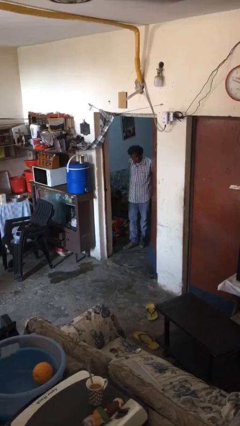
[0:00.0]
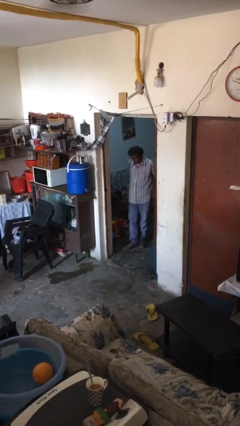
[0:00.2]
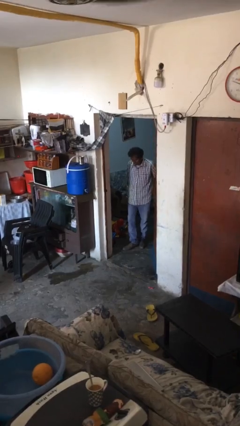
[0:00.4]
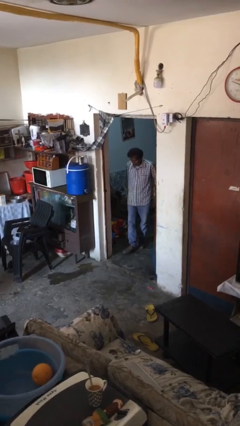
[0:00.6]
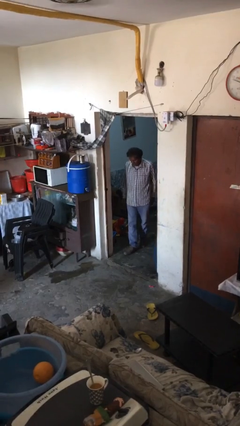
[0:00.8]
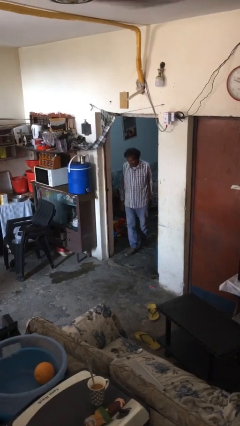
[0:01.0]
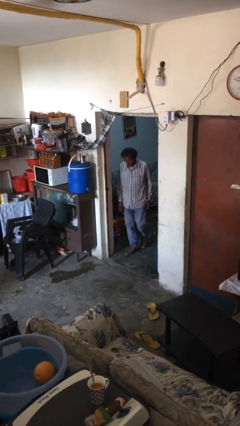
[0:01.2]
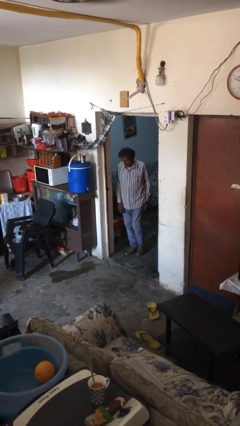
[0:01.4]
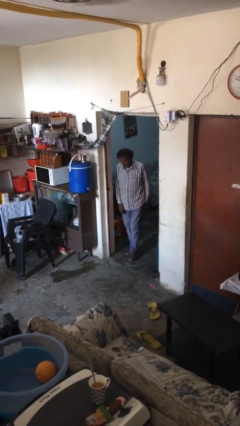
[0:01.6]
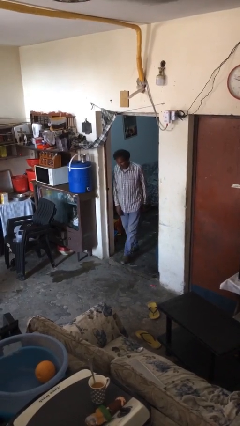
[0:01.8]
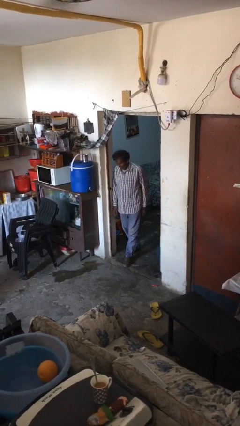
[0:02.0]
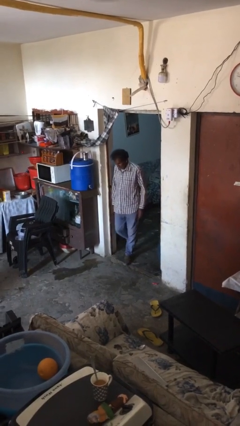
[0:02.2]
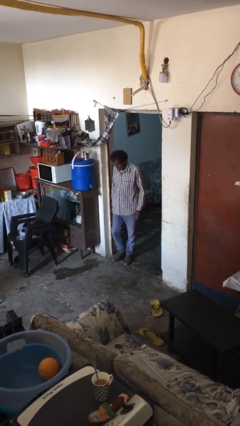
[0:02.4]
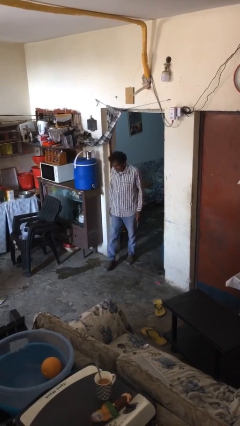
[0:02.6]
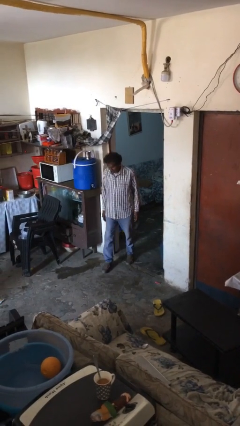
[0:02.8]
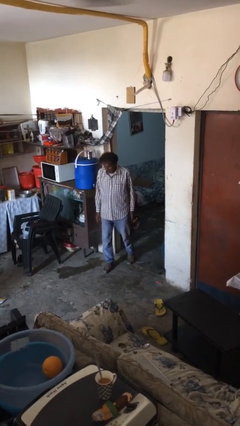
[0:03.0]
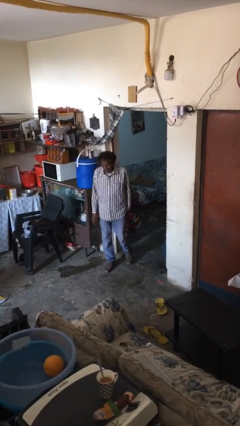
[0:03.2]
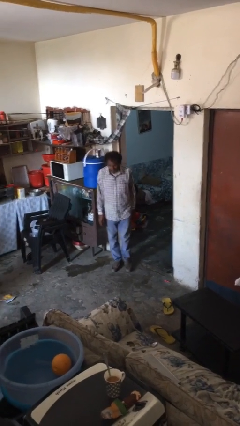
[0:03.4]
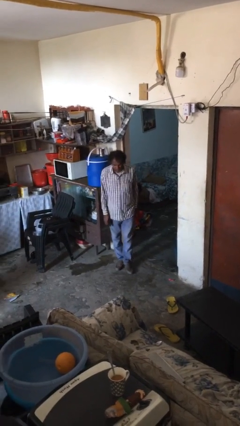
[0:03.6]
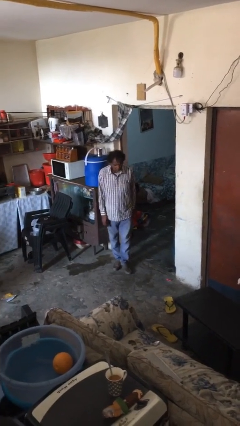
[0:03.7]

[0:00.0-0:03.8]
person enters scene through structure

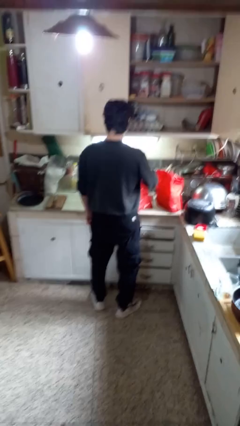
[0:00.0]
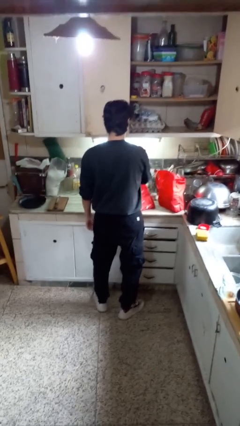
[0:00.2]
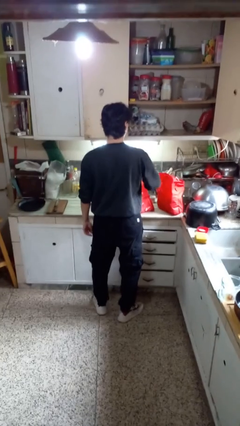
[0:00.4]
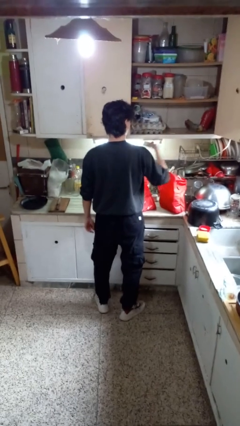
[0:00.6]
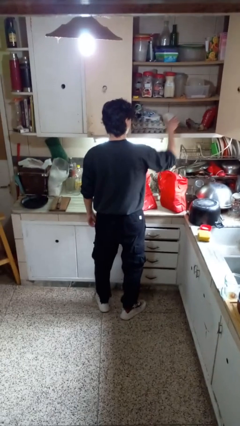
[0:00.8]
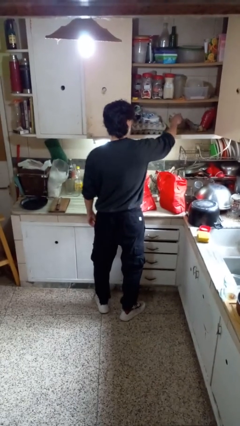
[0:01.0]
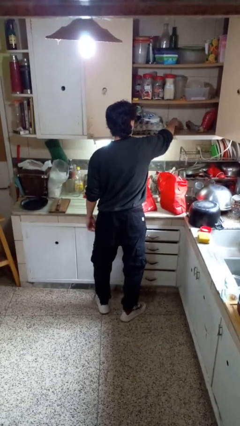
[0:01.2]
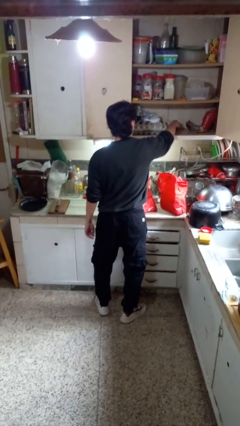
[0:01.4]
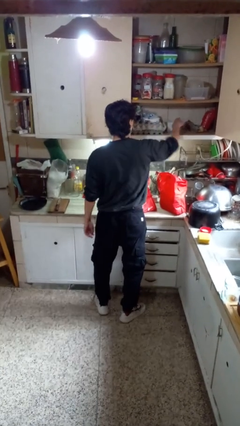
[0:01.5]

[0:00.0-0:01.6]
person loads groceries into cabinet

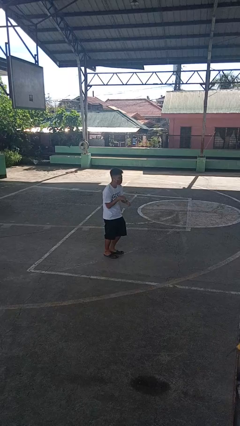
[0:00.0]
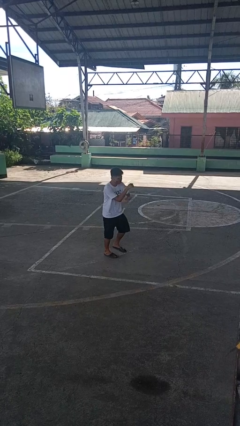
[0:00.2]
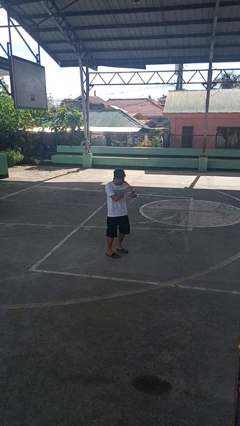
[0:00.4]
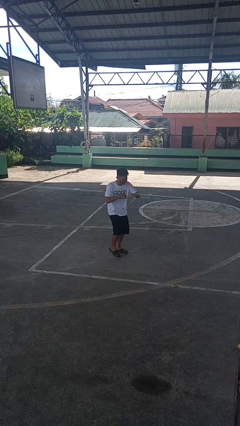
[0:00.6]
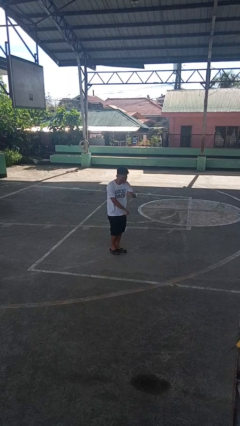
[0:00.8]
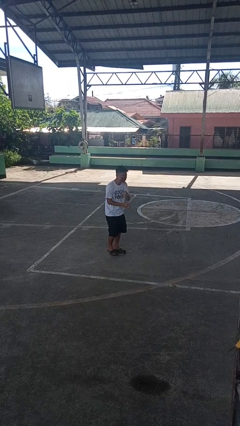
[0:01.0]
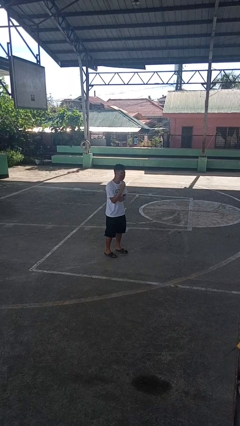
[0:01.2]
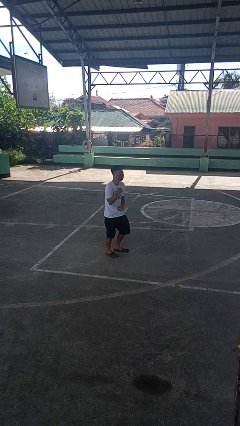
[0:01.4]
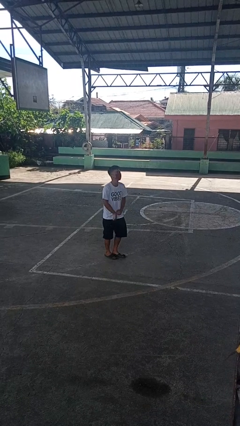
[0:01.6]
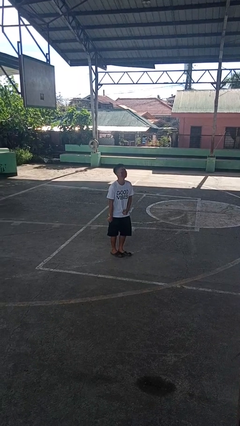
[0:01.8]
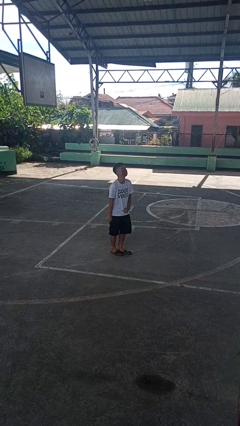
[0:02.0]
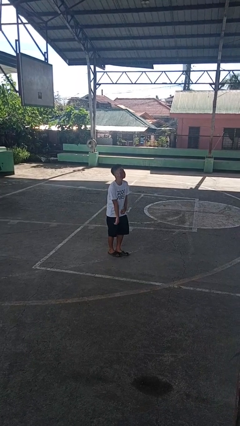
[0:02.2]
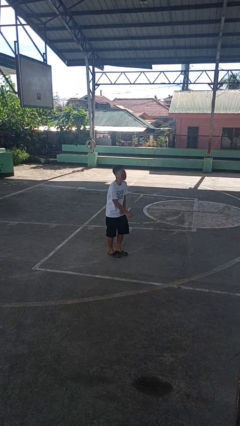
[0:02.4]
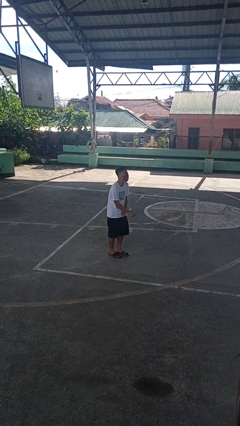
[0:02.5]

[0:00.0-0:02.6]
person dances in place

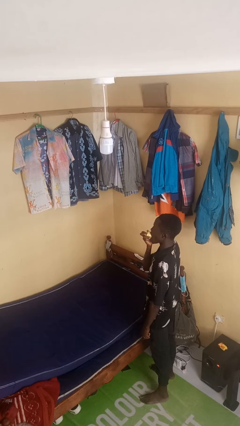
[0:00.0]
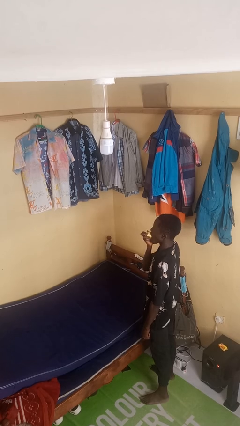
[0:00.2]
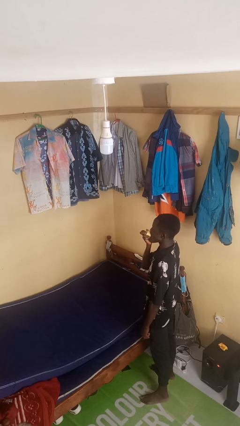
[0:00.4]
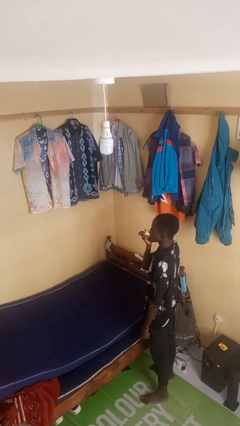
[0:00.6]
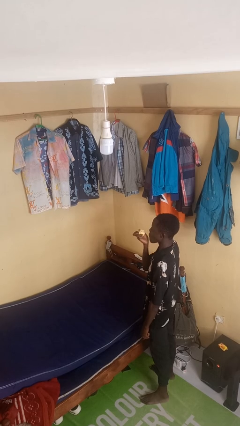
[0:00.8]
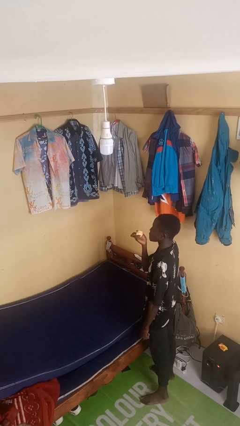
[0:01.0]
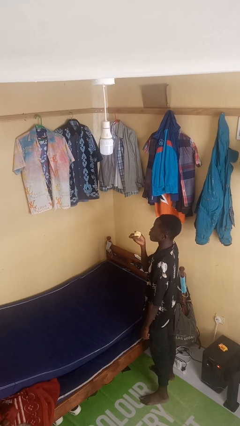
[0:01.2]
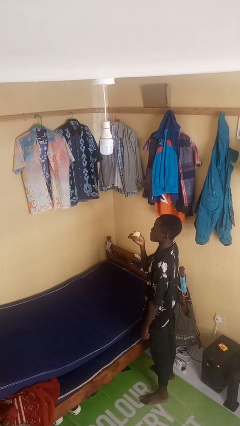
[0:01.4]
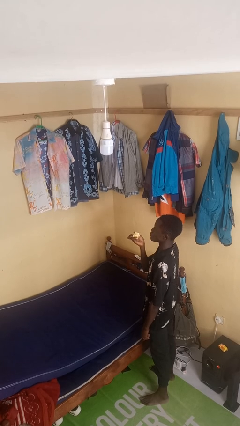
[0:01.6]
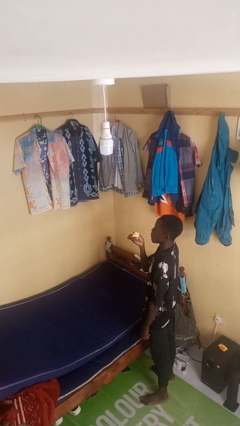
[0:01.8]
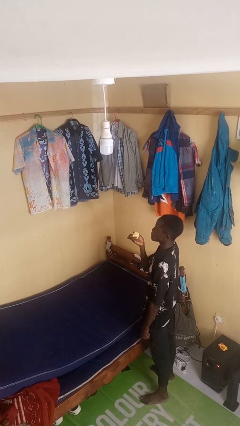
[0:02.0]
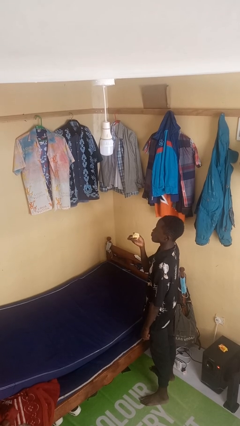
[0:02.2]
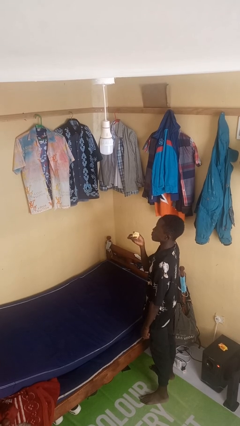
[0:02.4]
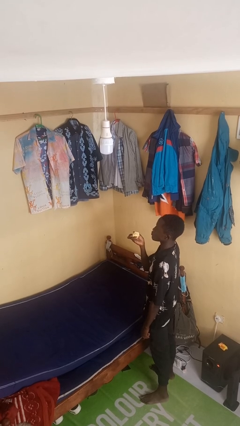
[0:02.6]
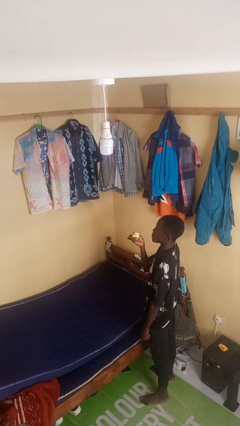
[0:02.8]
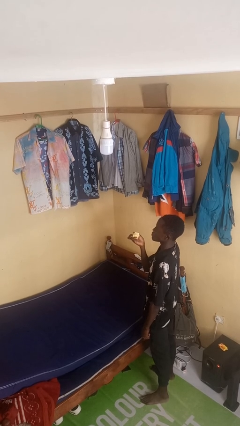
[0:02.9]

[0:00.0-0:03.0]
person eats apple

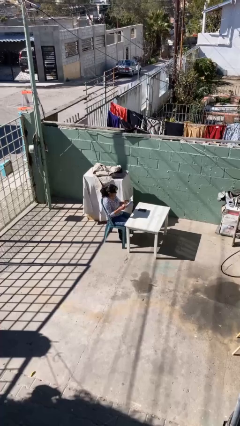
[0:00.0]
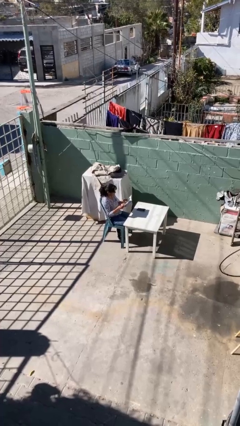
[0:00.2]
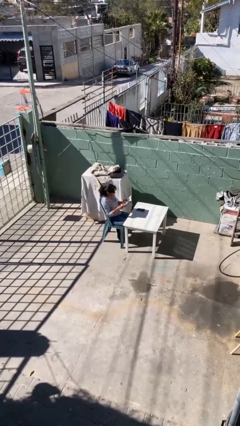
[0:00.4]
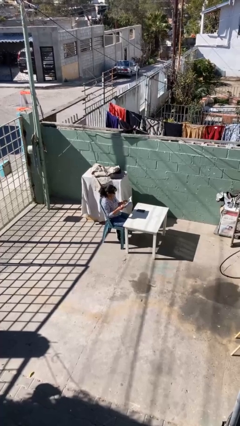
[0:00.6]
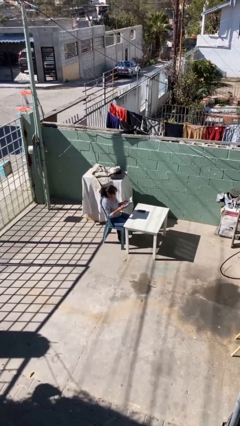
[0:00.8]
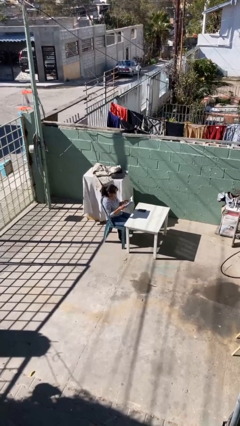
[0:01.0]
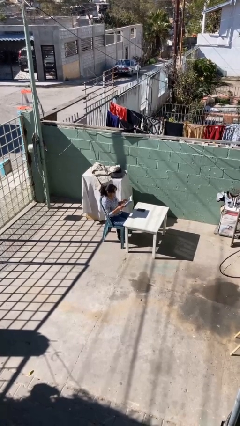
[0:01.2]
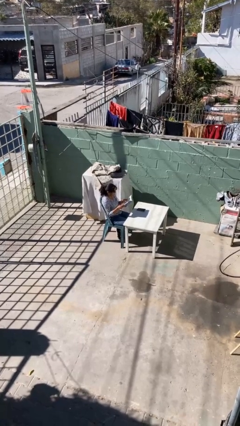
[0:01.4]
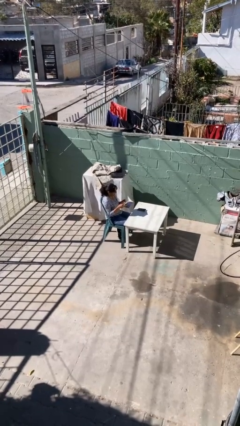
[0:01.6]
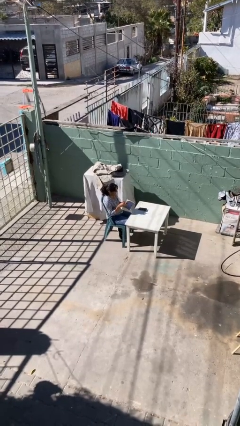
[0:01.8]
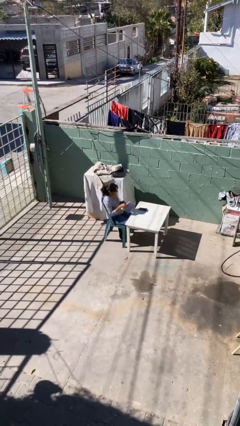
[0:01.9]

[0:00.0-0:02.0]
person reads document

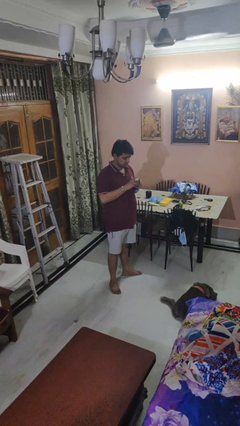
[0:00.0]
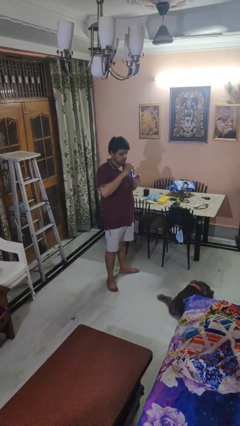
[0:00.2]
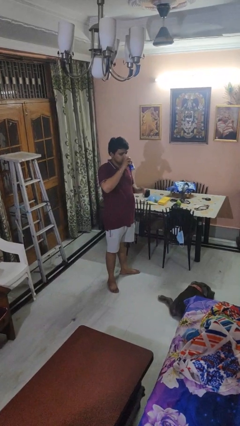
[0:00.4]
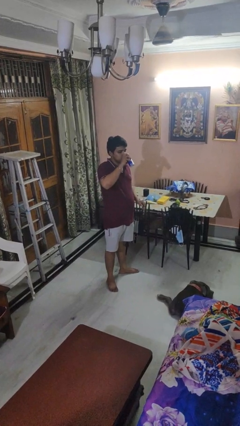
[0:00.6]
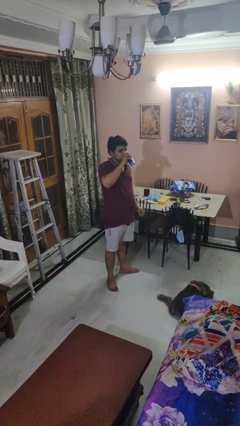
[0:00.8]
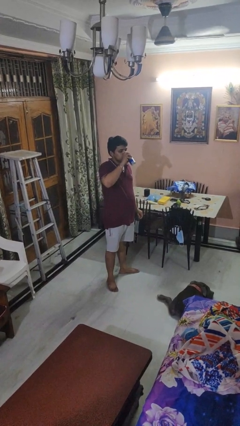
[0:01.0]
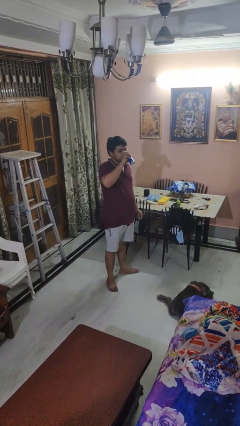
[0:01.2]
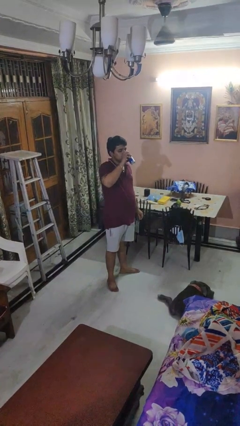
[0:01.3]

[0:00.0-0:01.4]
person drinks from beverage can

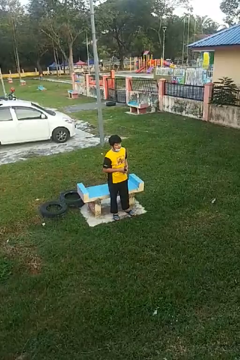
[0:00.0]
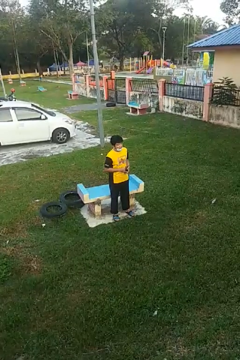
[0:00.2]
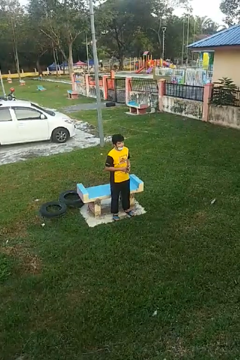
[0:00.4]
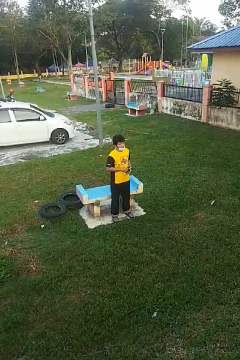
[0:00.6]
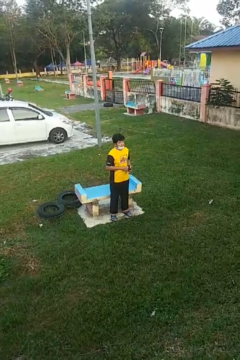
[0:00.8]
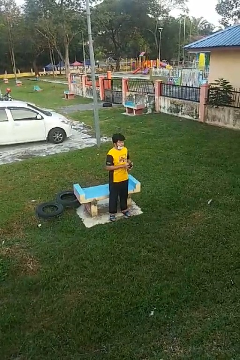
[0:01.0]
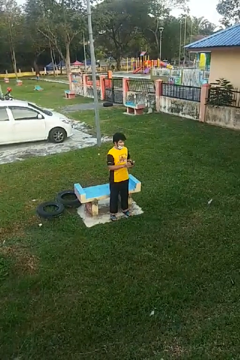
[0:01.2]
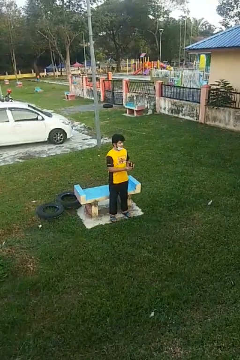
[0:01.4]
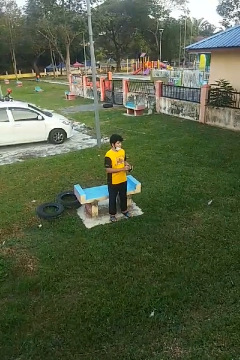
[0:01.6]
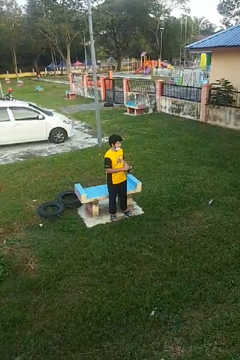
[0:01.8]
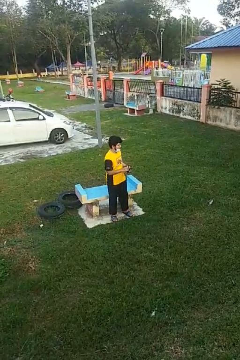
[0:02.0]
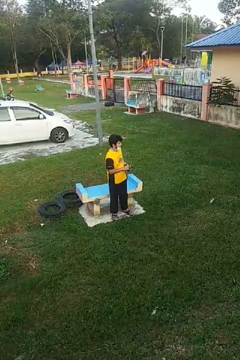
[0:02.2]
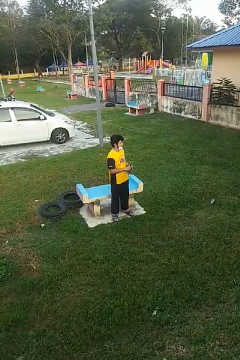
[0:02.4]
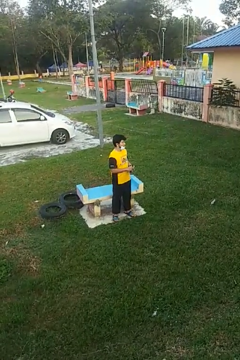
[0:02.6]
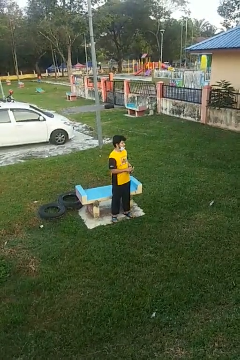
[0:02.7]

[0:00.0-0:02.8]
person searches in purse

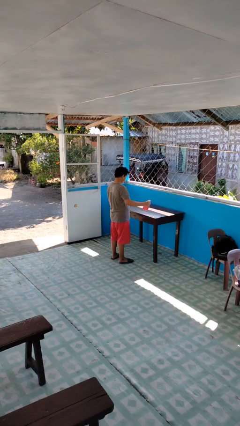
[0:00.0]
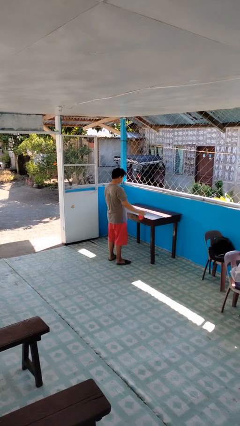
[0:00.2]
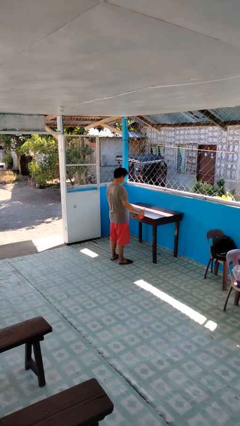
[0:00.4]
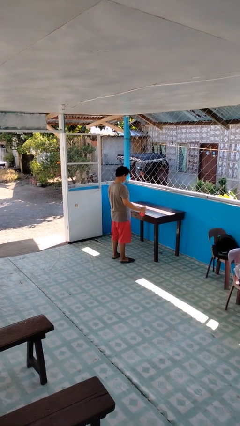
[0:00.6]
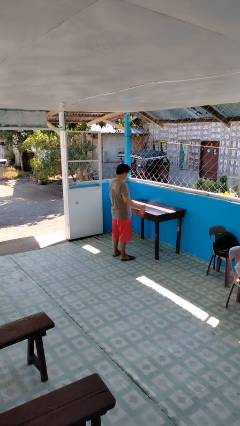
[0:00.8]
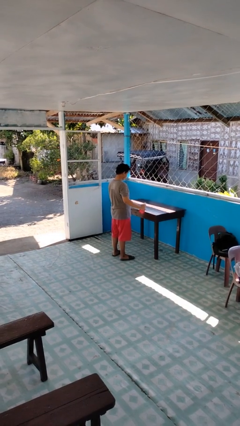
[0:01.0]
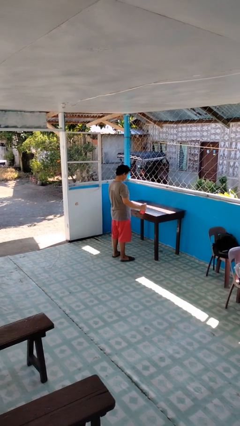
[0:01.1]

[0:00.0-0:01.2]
person sprays from bottle
